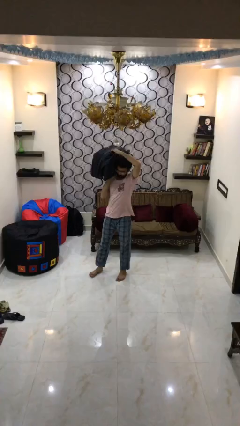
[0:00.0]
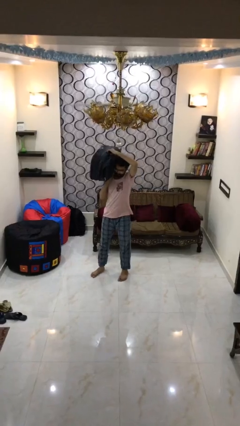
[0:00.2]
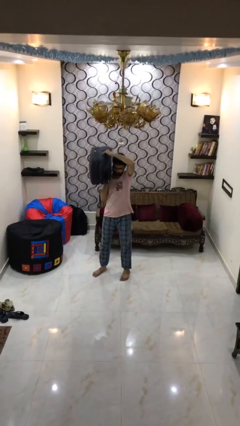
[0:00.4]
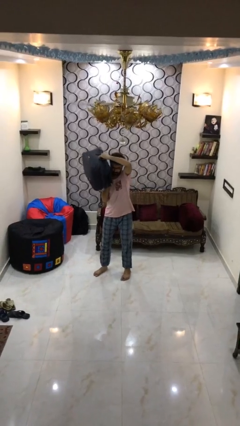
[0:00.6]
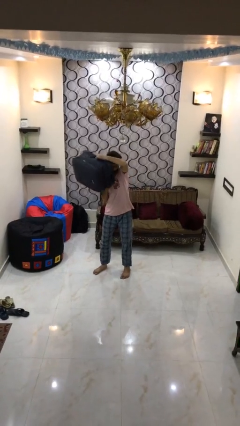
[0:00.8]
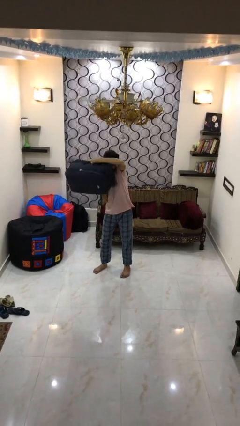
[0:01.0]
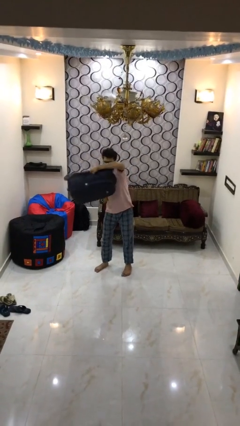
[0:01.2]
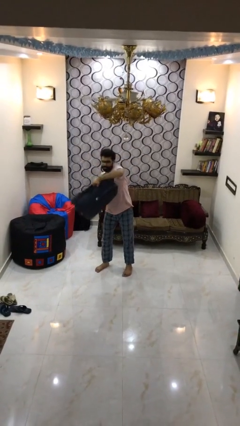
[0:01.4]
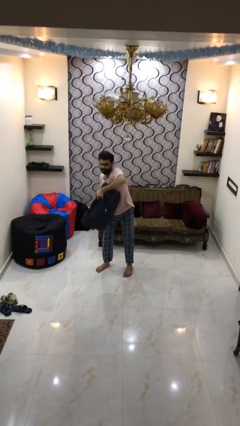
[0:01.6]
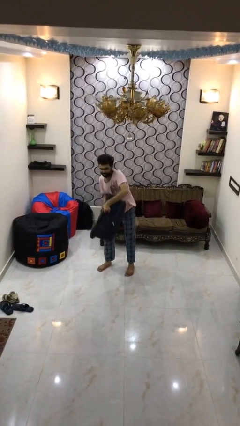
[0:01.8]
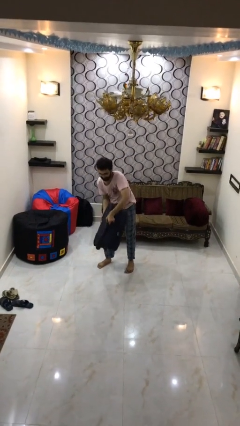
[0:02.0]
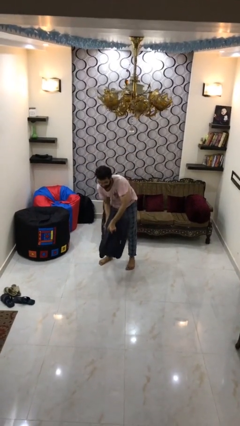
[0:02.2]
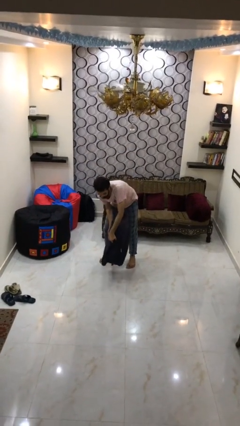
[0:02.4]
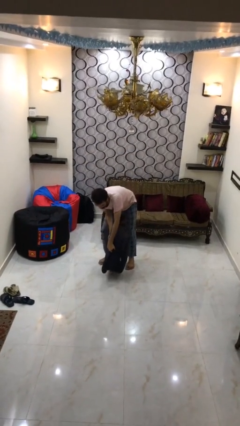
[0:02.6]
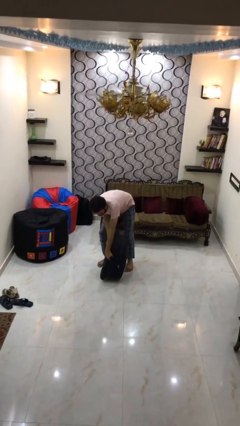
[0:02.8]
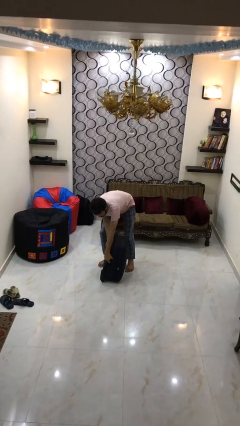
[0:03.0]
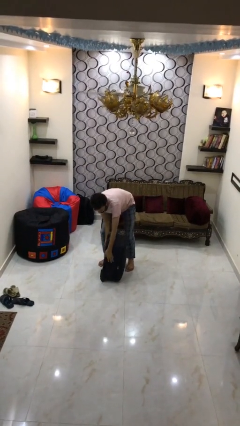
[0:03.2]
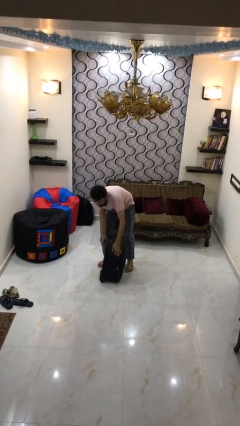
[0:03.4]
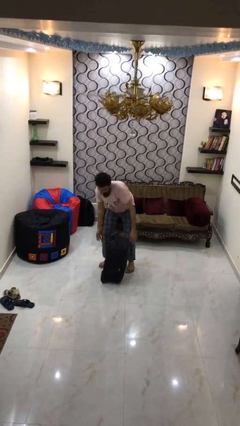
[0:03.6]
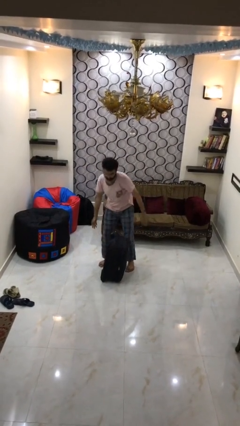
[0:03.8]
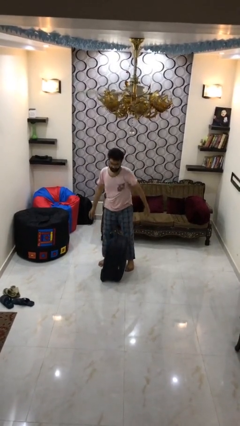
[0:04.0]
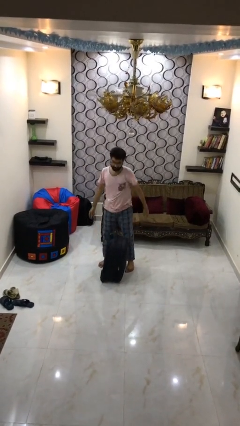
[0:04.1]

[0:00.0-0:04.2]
person puts down object on floor

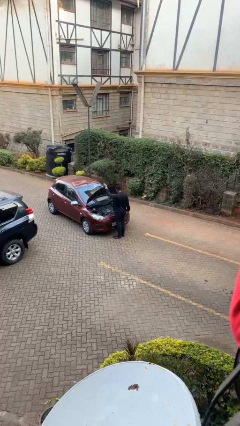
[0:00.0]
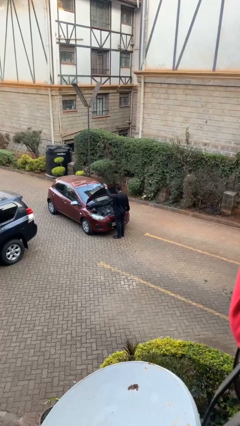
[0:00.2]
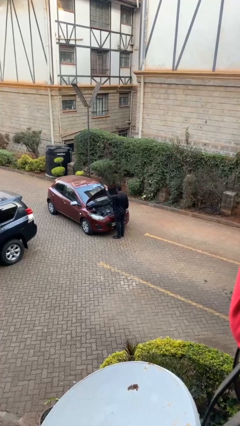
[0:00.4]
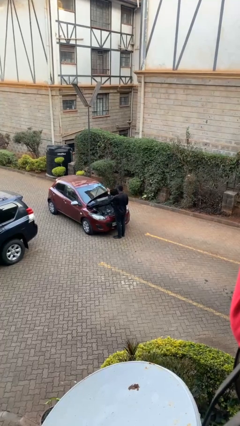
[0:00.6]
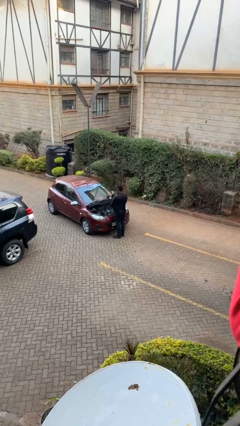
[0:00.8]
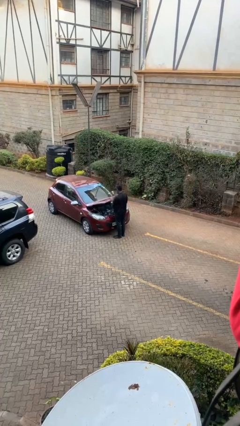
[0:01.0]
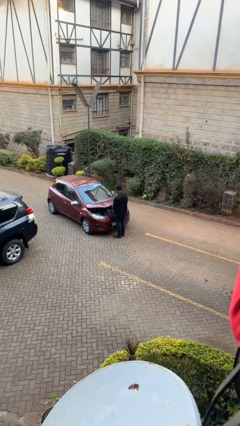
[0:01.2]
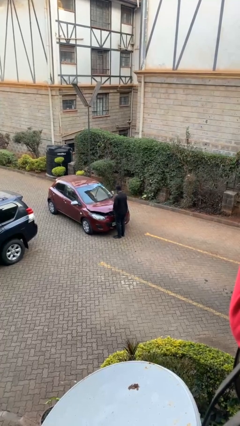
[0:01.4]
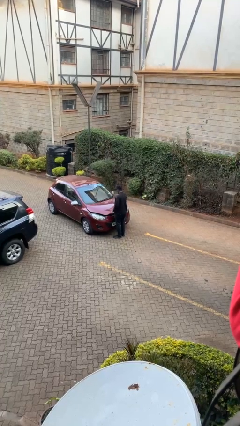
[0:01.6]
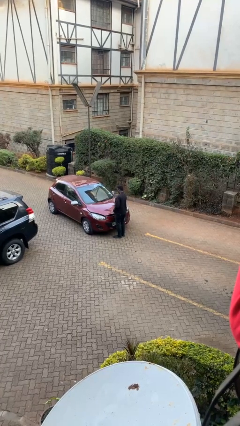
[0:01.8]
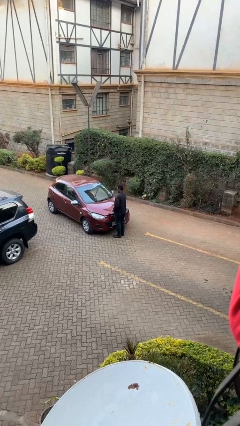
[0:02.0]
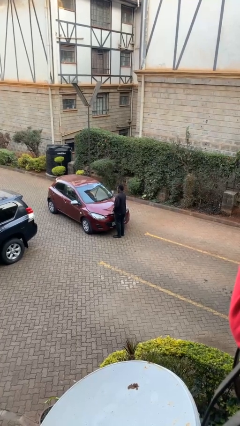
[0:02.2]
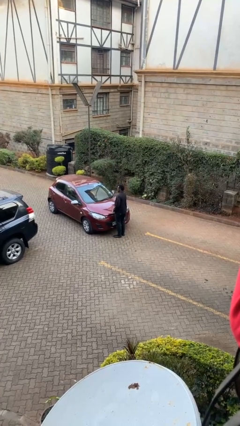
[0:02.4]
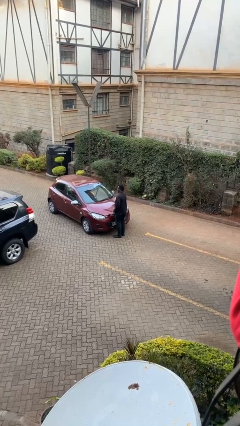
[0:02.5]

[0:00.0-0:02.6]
person closes car hood

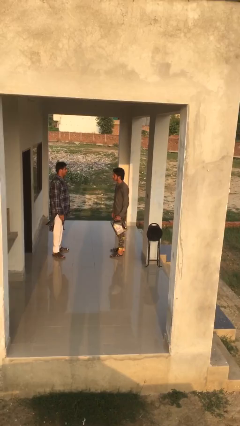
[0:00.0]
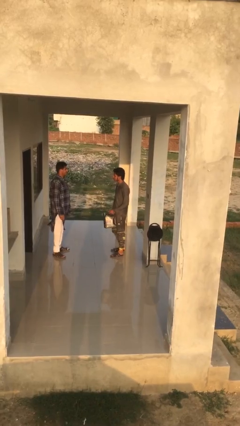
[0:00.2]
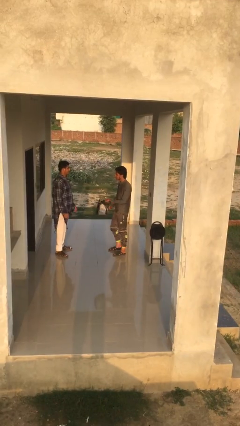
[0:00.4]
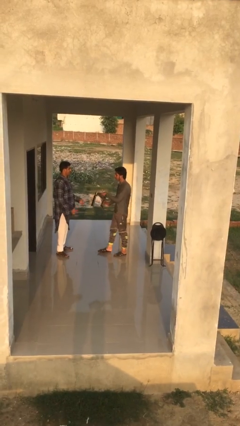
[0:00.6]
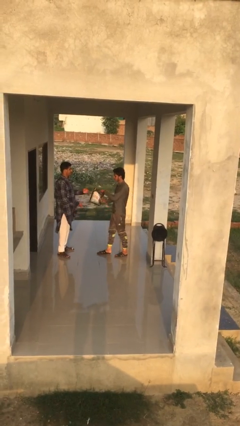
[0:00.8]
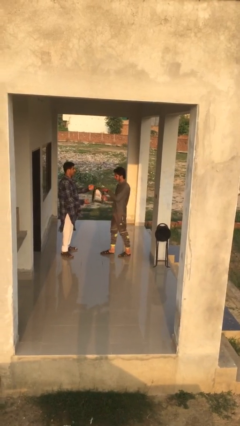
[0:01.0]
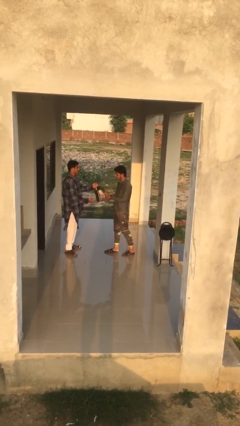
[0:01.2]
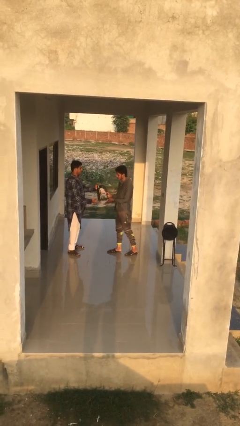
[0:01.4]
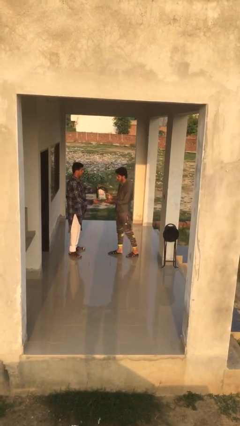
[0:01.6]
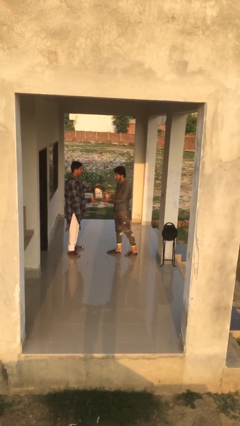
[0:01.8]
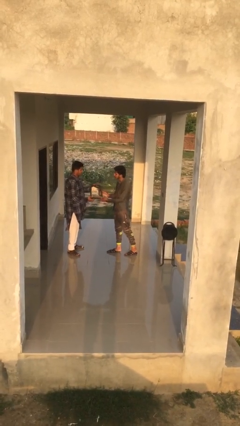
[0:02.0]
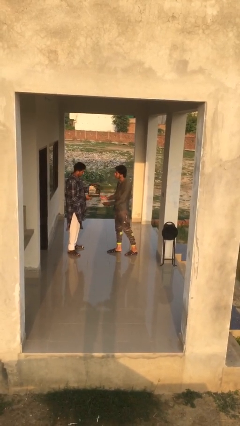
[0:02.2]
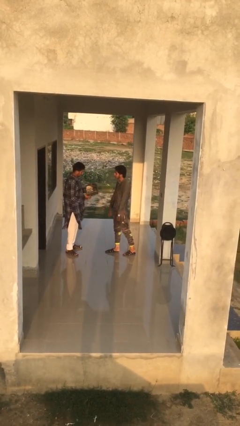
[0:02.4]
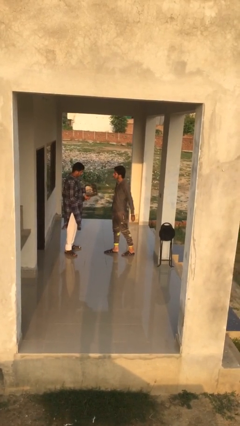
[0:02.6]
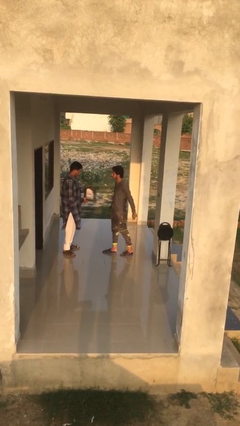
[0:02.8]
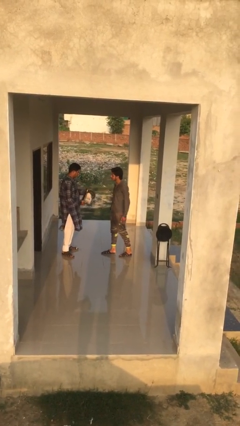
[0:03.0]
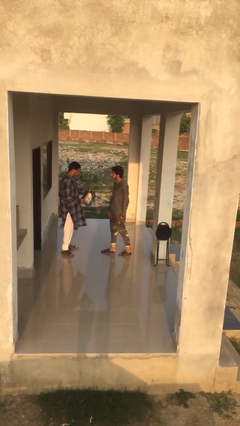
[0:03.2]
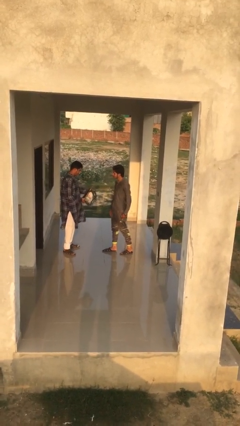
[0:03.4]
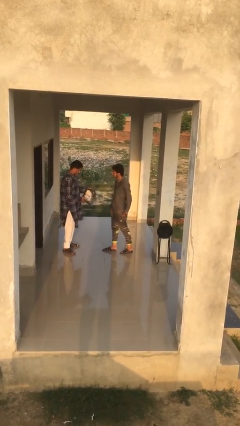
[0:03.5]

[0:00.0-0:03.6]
person transfers object to person

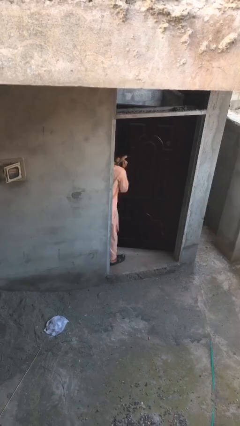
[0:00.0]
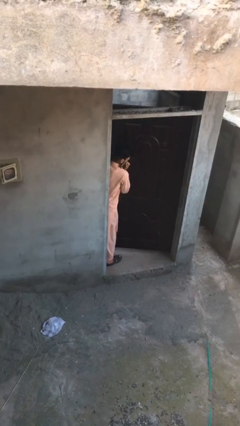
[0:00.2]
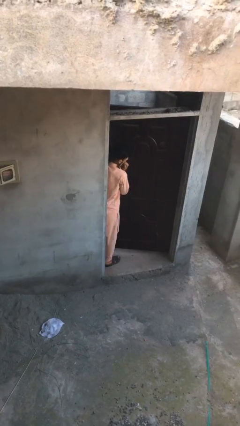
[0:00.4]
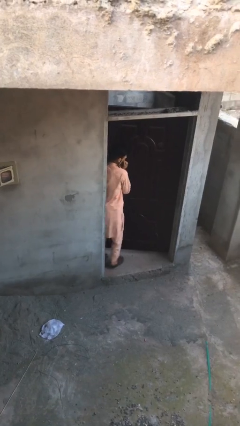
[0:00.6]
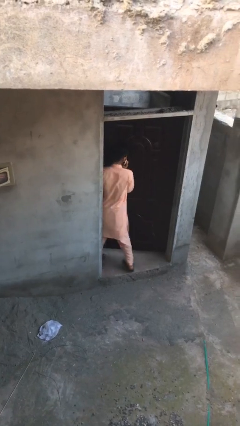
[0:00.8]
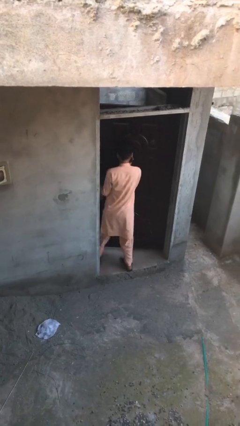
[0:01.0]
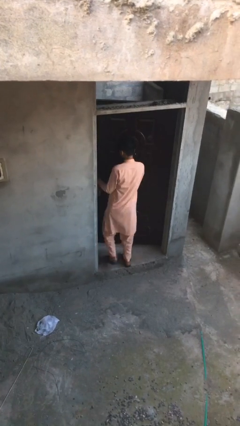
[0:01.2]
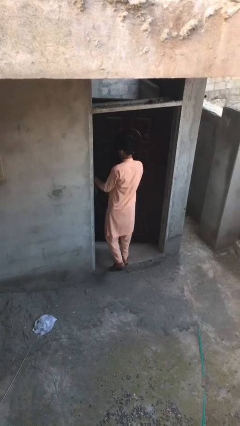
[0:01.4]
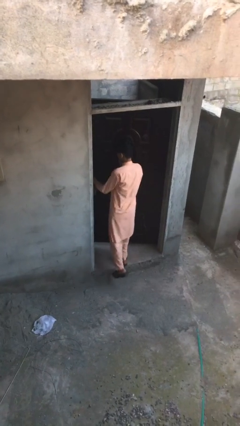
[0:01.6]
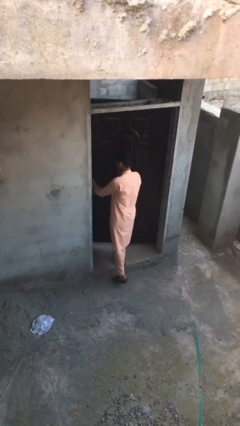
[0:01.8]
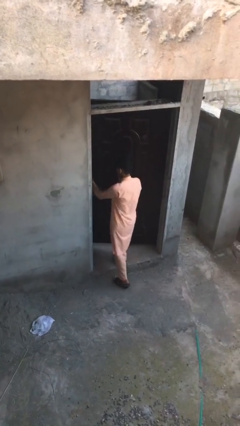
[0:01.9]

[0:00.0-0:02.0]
person enters scene through structure

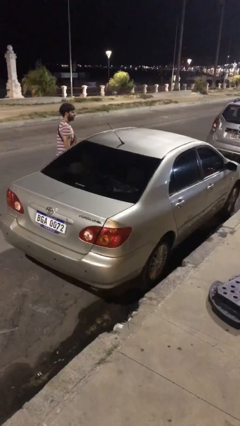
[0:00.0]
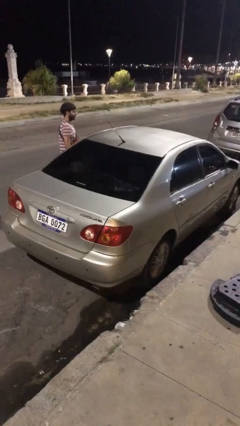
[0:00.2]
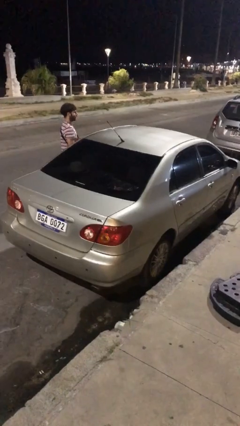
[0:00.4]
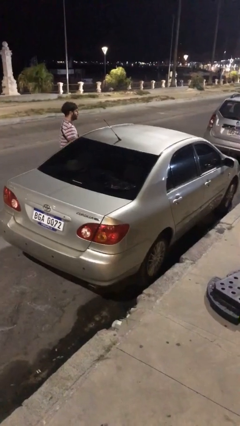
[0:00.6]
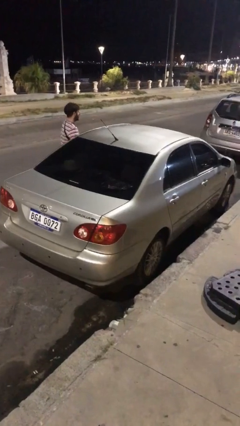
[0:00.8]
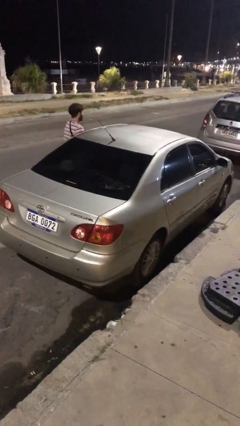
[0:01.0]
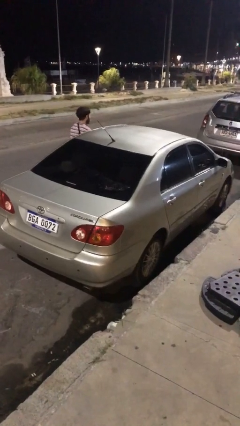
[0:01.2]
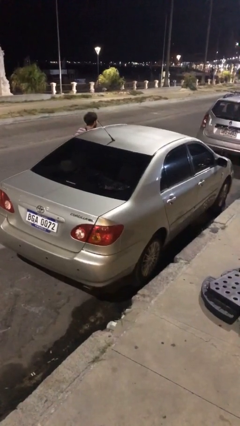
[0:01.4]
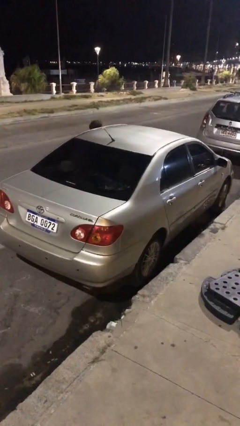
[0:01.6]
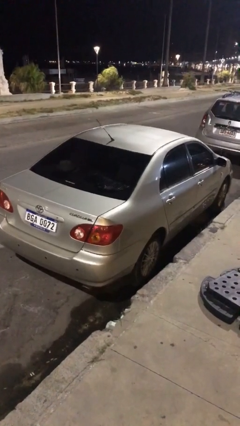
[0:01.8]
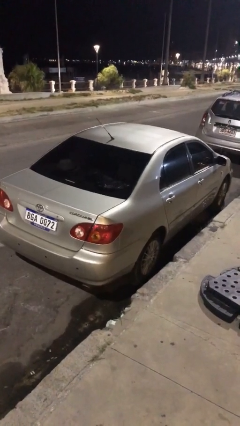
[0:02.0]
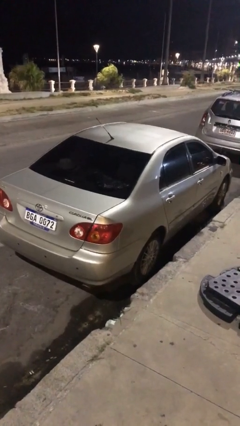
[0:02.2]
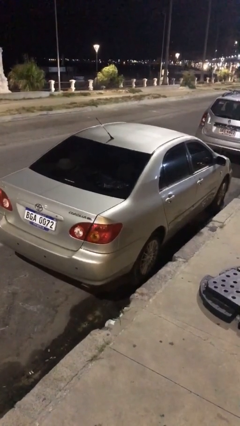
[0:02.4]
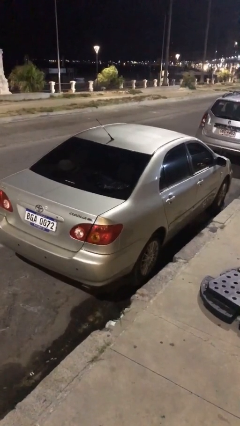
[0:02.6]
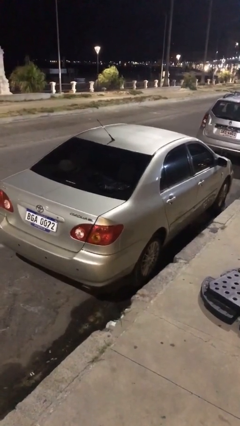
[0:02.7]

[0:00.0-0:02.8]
car picks up person

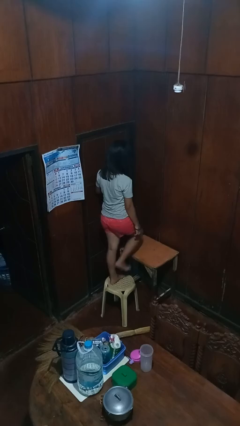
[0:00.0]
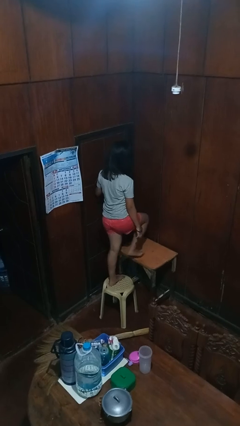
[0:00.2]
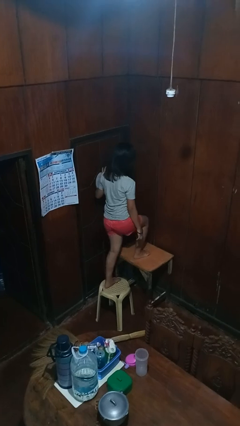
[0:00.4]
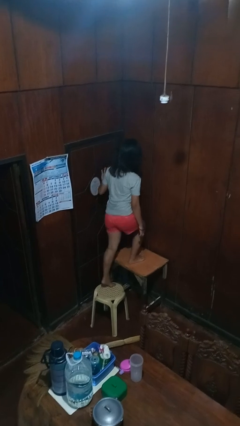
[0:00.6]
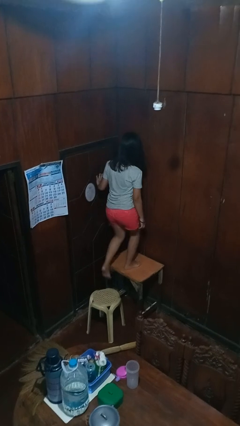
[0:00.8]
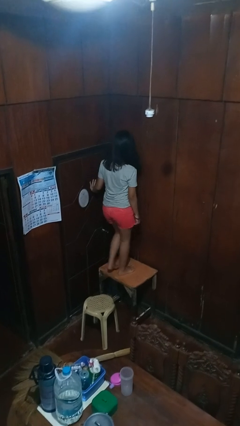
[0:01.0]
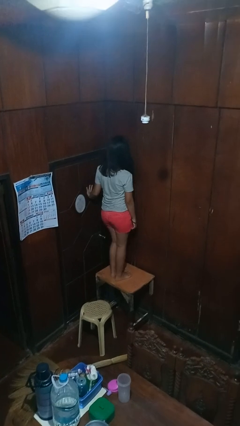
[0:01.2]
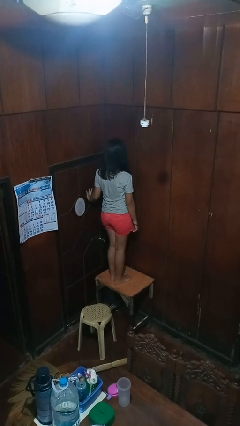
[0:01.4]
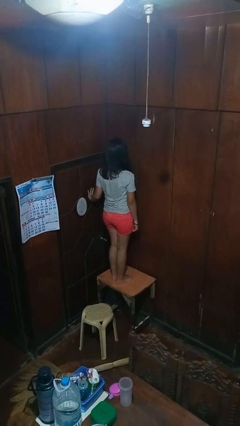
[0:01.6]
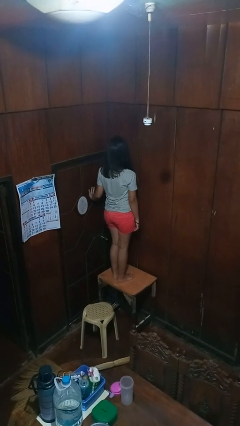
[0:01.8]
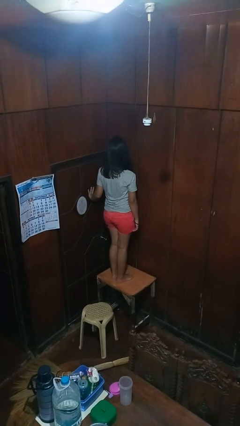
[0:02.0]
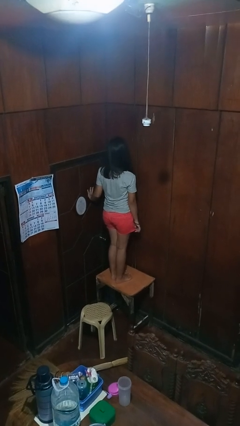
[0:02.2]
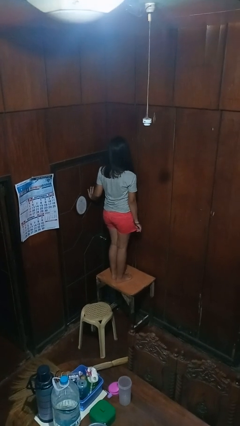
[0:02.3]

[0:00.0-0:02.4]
person climbs on table
